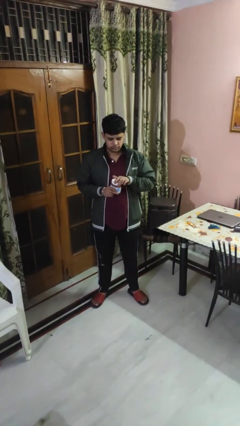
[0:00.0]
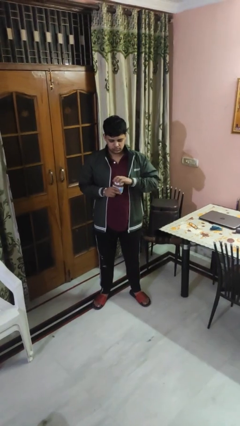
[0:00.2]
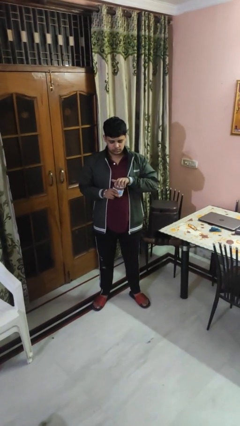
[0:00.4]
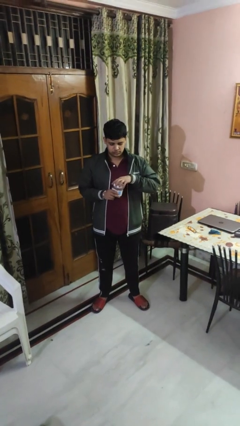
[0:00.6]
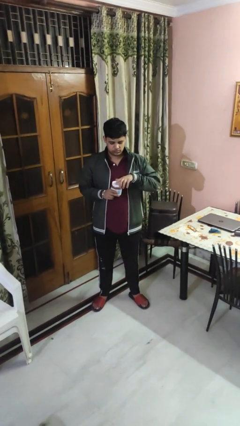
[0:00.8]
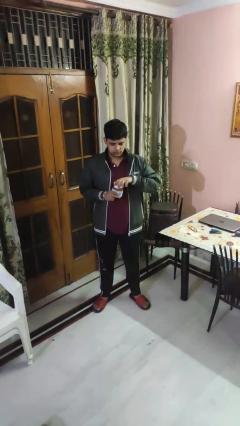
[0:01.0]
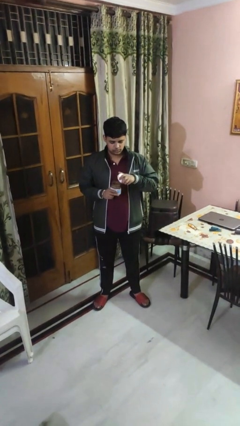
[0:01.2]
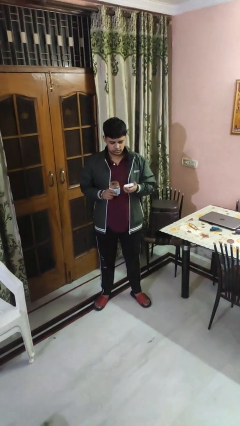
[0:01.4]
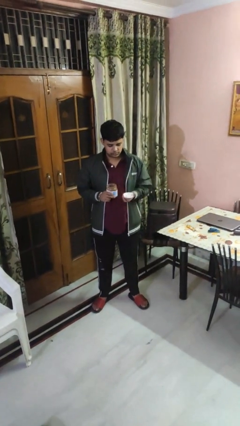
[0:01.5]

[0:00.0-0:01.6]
person opens jar

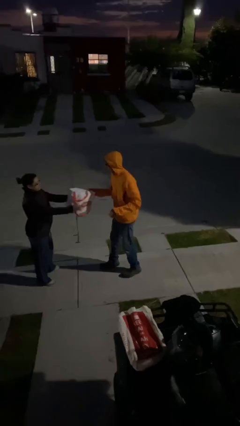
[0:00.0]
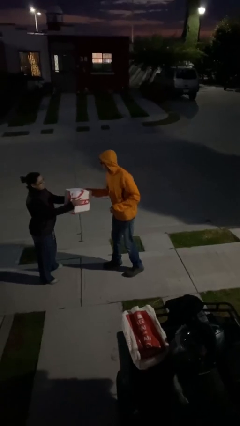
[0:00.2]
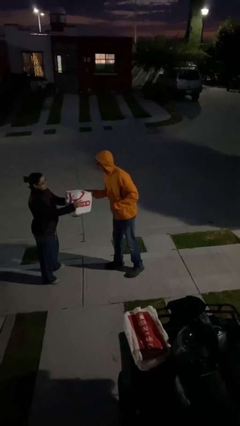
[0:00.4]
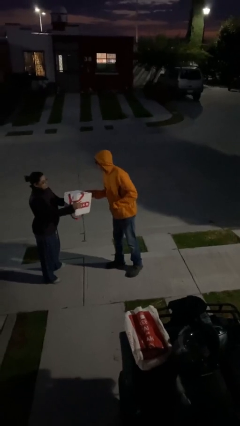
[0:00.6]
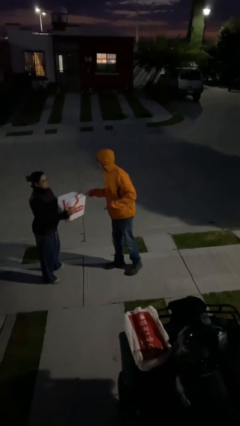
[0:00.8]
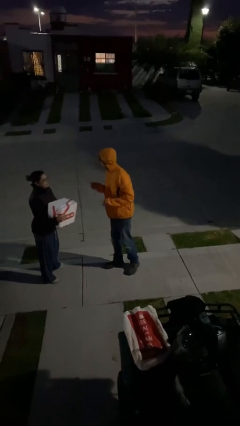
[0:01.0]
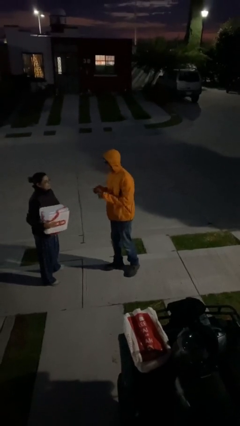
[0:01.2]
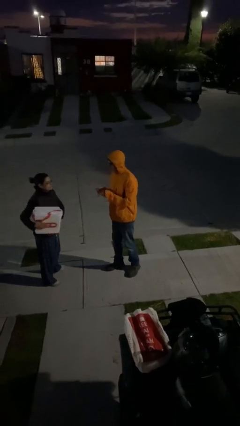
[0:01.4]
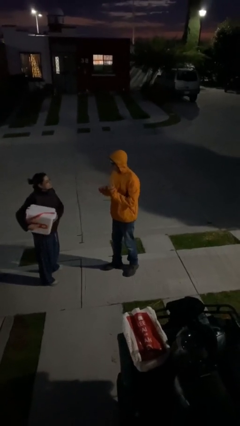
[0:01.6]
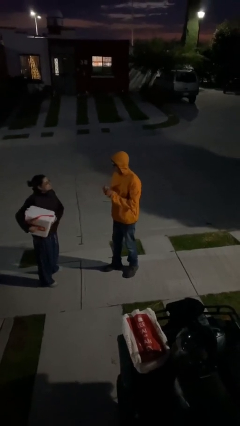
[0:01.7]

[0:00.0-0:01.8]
person transfers object to person

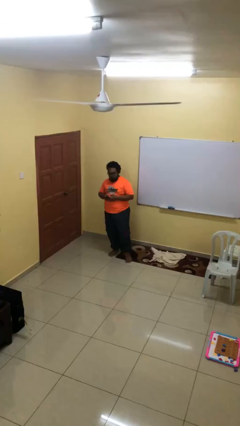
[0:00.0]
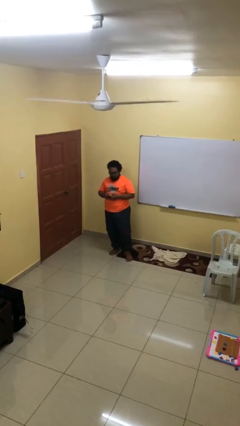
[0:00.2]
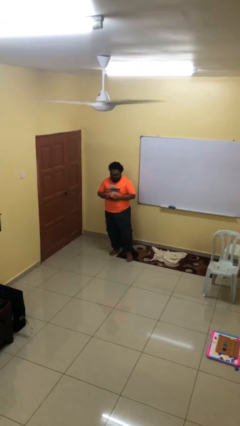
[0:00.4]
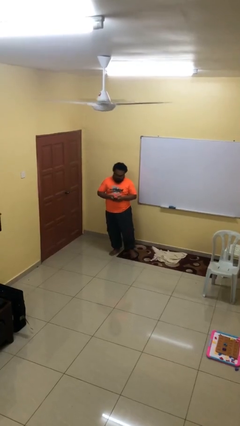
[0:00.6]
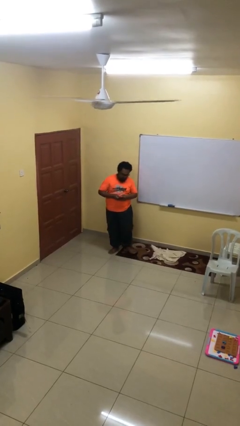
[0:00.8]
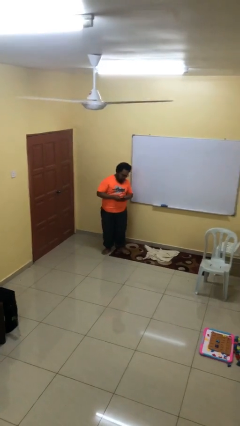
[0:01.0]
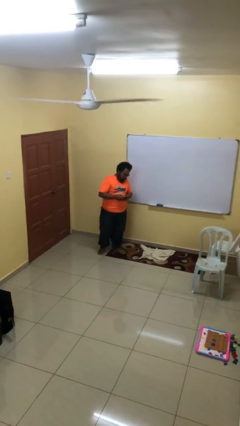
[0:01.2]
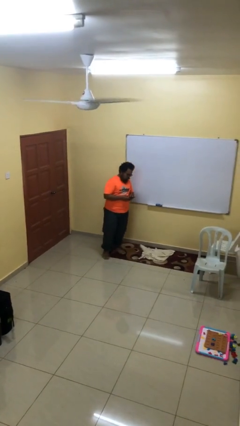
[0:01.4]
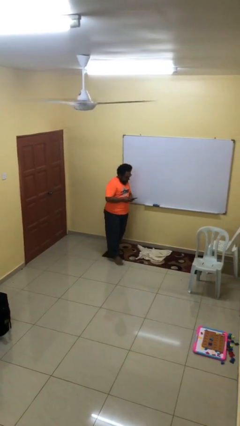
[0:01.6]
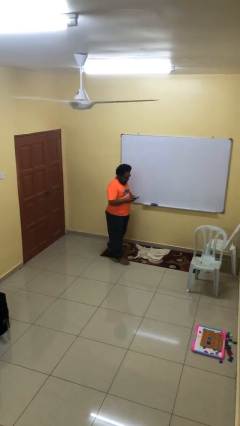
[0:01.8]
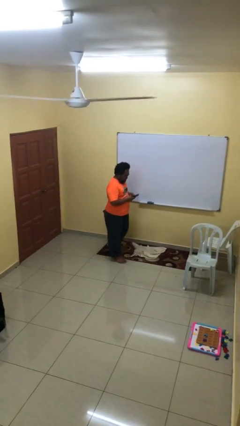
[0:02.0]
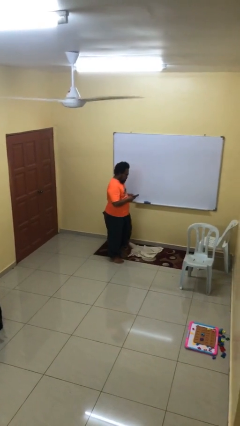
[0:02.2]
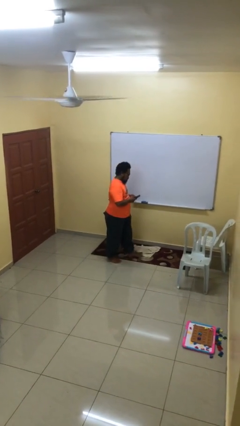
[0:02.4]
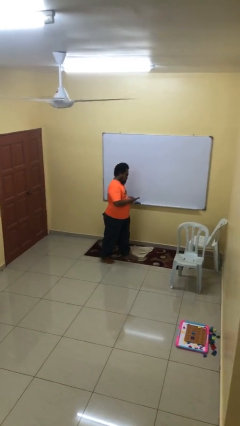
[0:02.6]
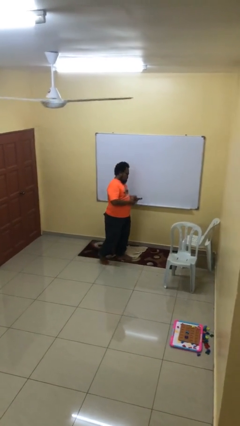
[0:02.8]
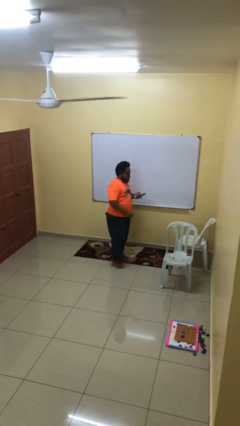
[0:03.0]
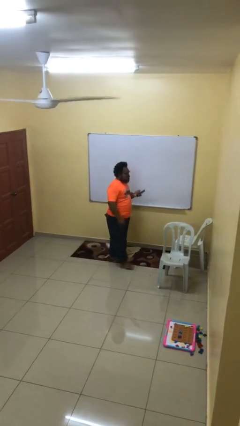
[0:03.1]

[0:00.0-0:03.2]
person texts on phone

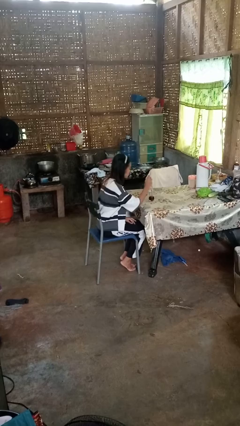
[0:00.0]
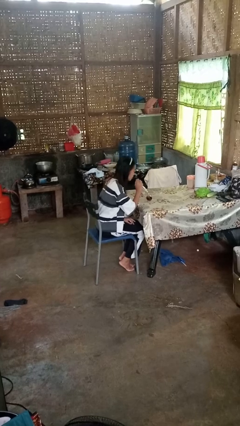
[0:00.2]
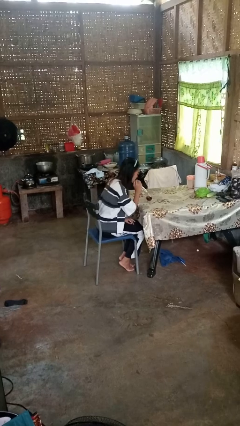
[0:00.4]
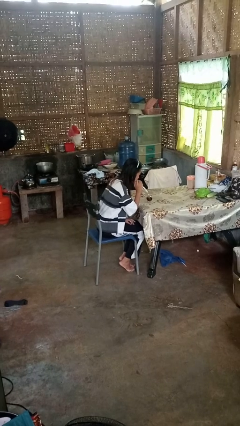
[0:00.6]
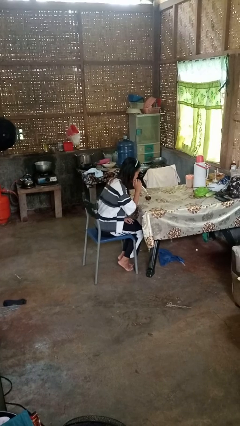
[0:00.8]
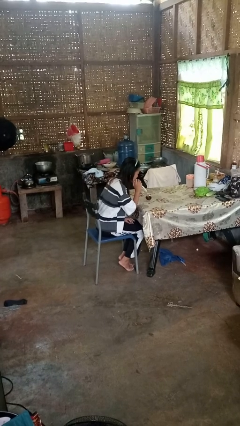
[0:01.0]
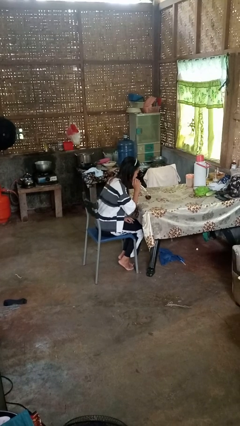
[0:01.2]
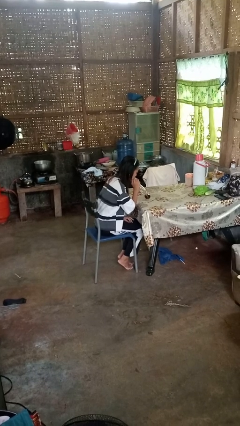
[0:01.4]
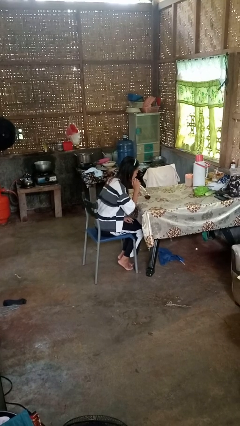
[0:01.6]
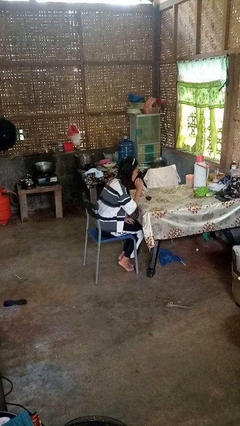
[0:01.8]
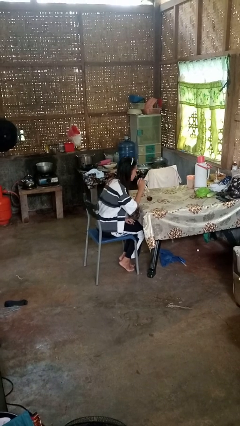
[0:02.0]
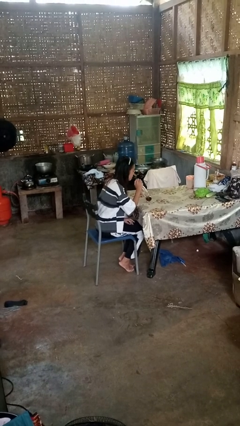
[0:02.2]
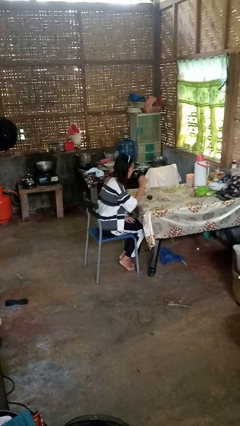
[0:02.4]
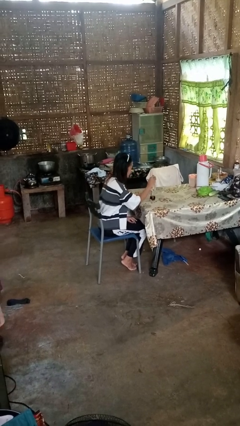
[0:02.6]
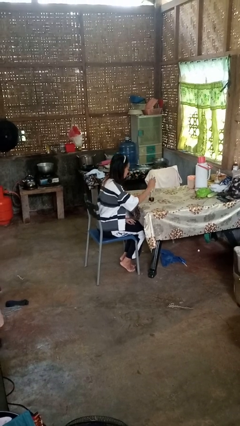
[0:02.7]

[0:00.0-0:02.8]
person drinks from straw

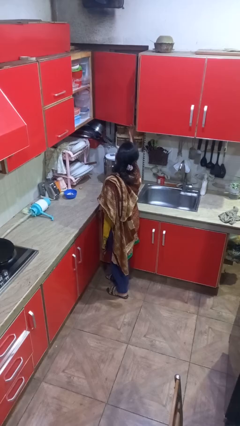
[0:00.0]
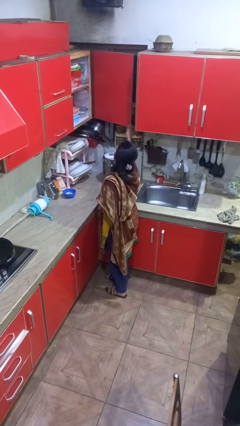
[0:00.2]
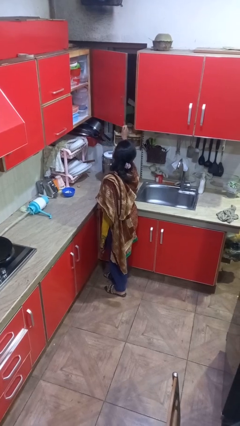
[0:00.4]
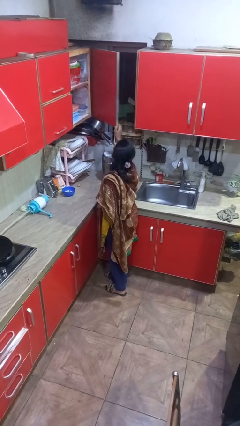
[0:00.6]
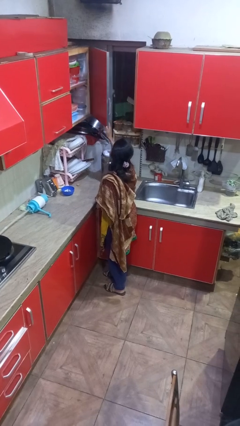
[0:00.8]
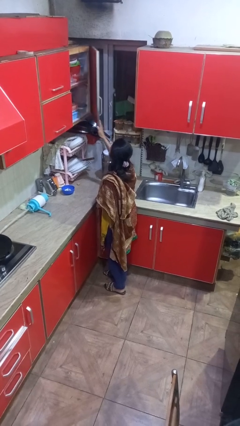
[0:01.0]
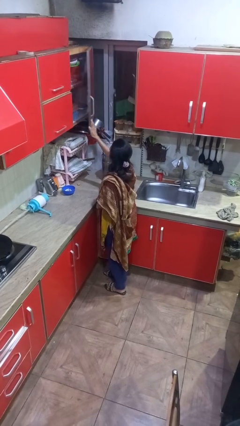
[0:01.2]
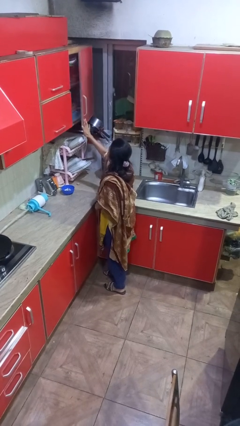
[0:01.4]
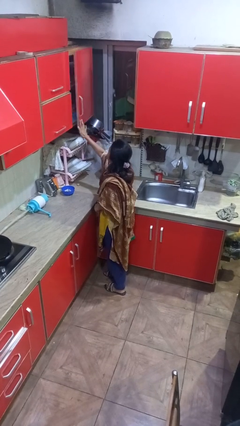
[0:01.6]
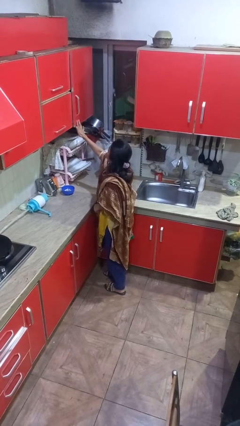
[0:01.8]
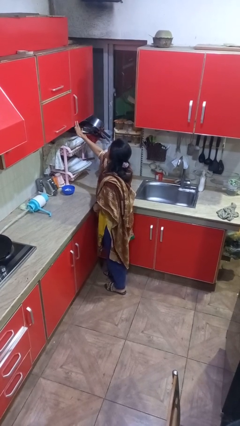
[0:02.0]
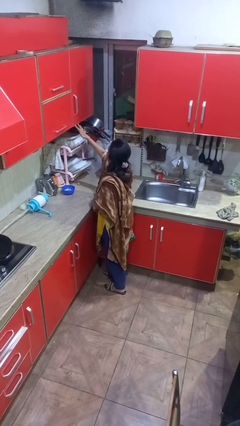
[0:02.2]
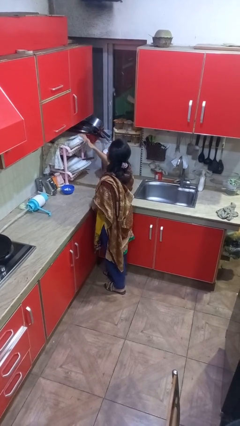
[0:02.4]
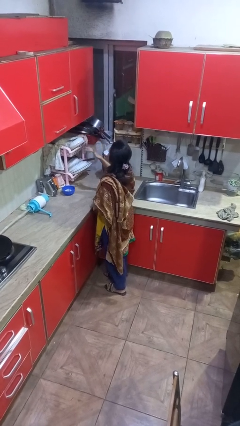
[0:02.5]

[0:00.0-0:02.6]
person closes cabinet

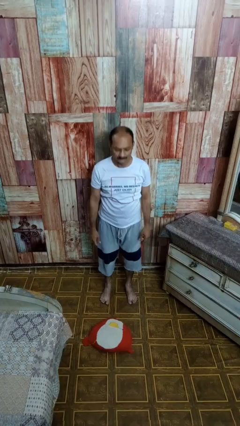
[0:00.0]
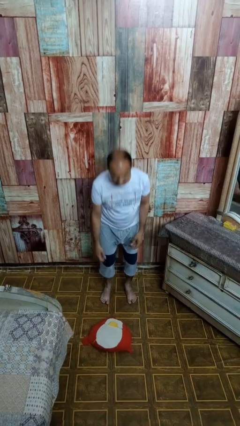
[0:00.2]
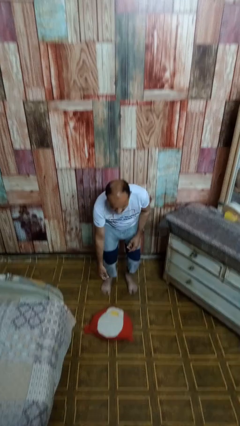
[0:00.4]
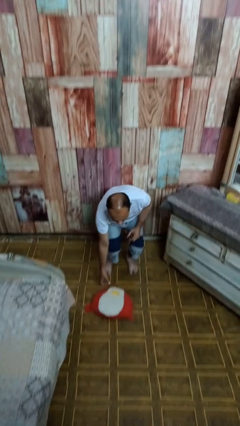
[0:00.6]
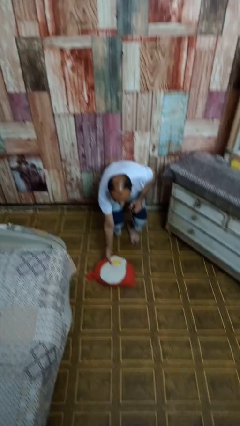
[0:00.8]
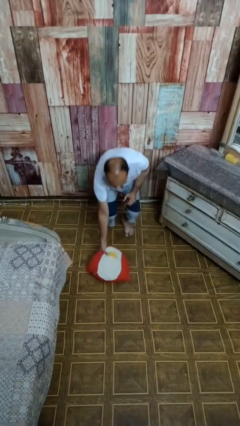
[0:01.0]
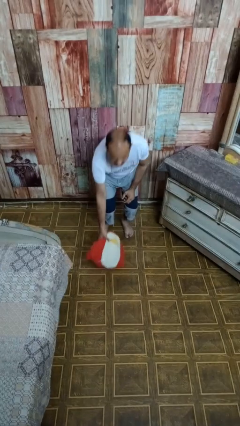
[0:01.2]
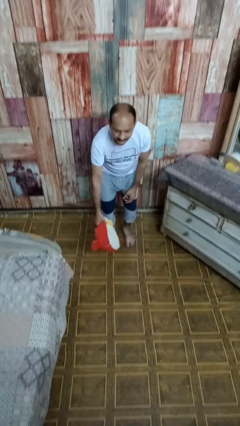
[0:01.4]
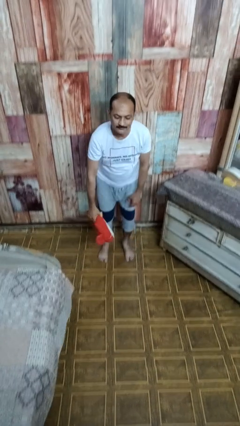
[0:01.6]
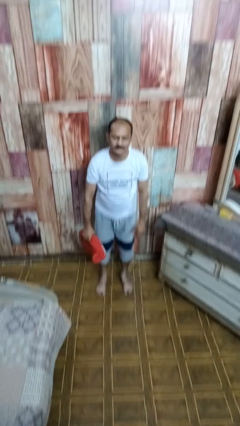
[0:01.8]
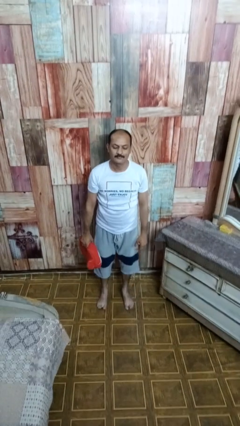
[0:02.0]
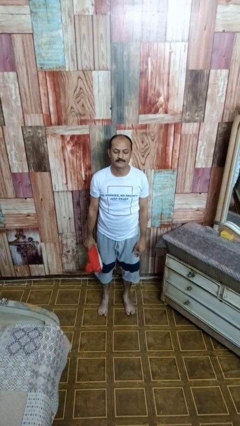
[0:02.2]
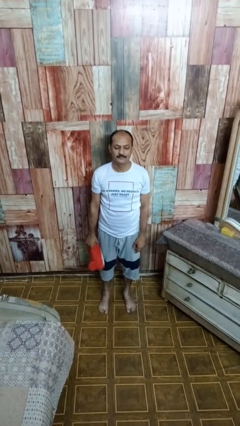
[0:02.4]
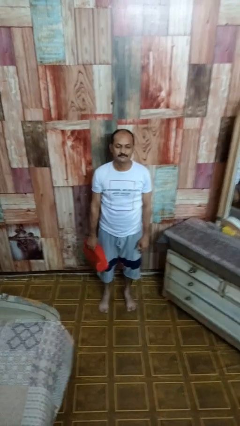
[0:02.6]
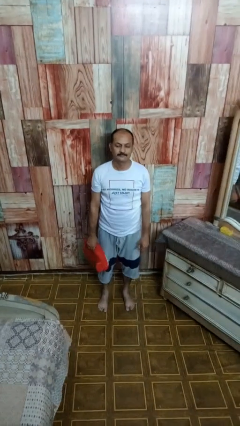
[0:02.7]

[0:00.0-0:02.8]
person picks up object from floor

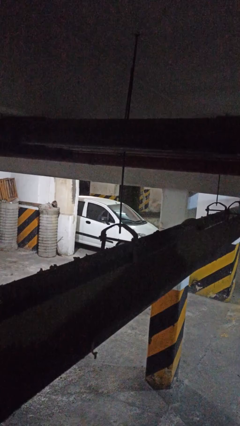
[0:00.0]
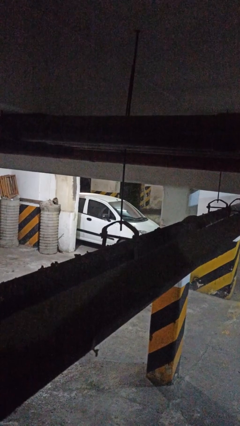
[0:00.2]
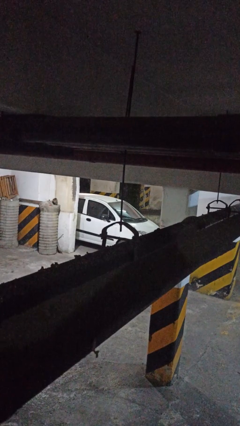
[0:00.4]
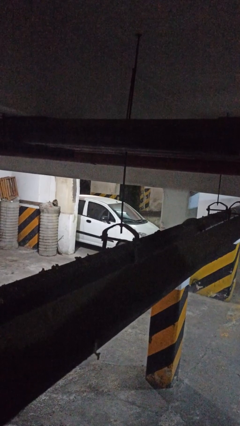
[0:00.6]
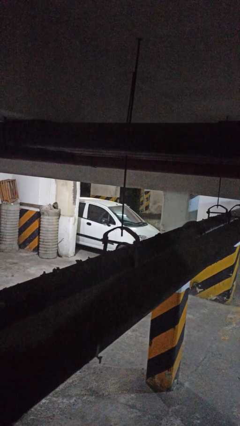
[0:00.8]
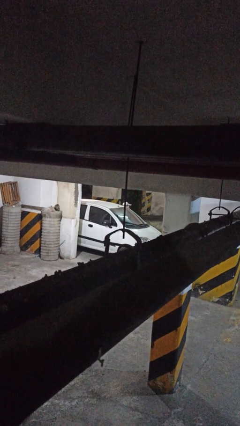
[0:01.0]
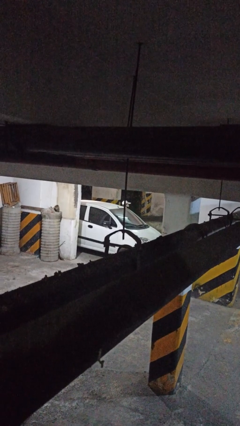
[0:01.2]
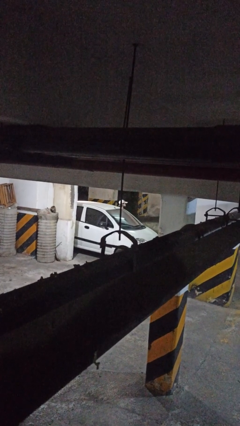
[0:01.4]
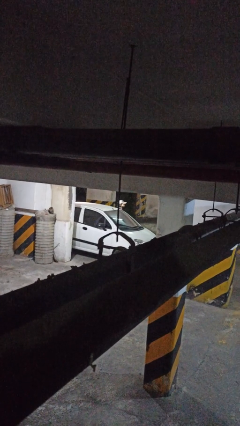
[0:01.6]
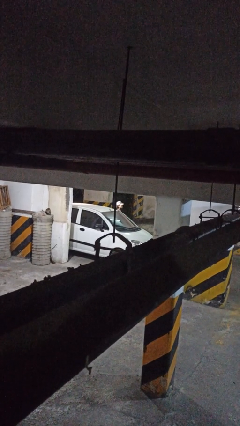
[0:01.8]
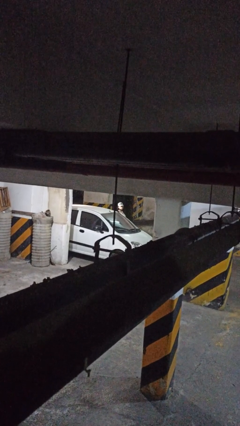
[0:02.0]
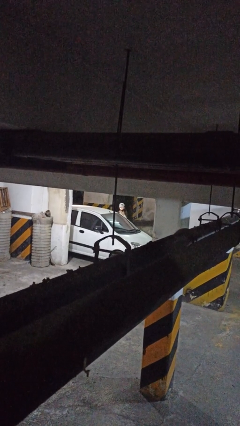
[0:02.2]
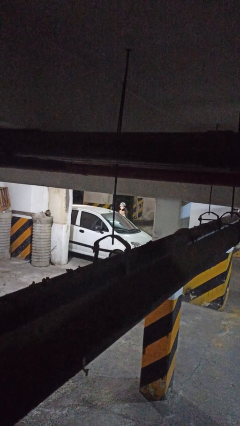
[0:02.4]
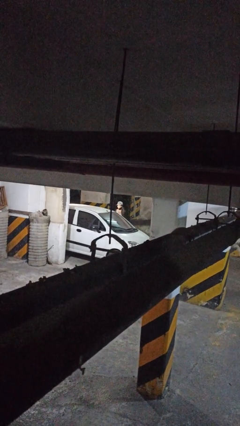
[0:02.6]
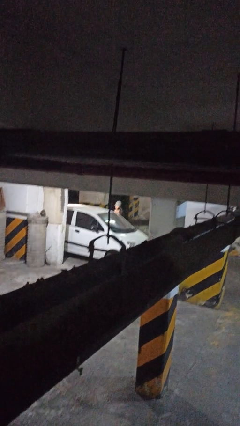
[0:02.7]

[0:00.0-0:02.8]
person exits car
